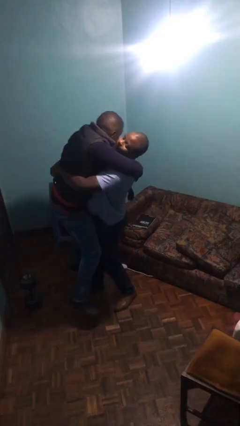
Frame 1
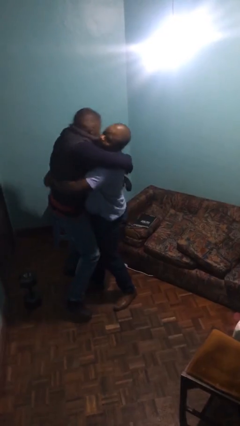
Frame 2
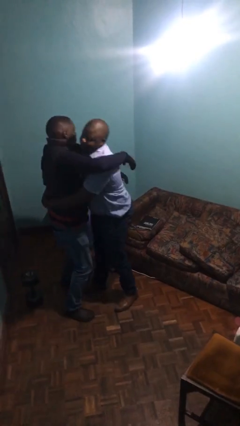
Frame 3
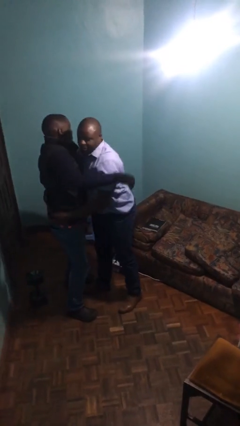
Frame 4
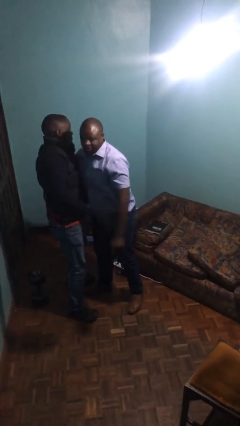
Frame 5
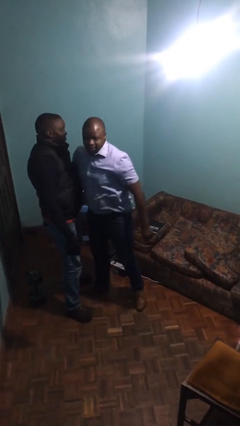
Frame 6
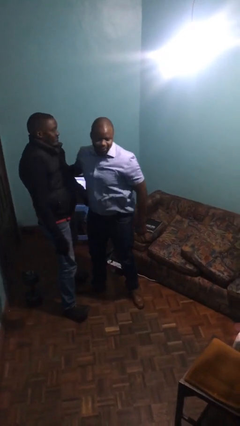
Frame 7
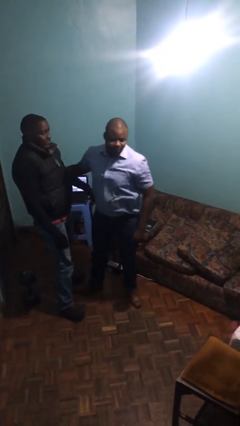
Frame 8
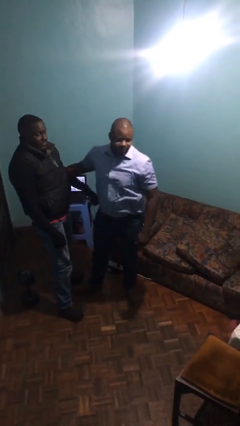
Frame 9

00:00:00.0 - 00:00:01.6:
person puts down person

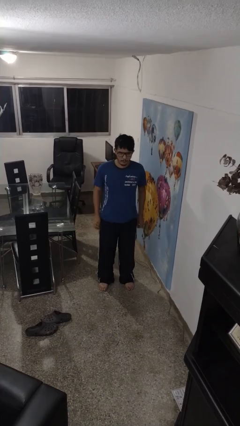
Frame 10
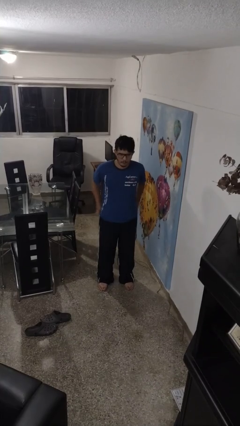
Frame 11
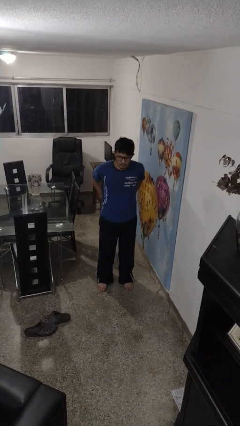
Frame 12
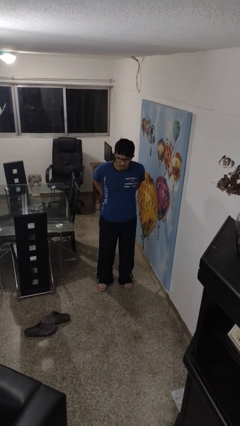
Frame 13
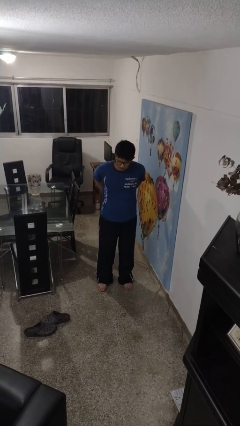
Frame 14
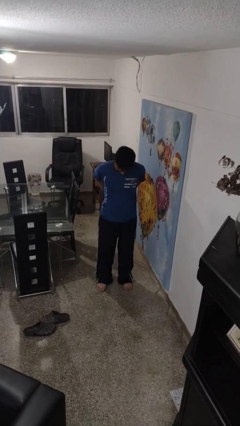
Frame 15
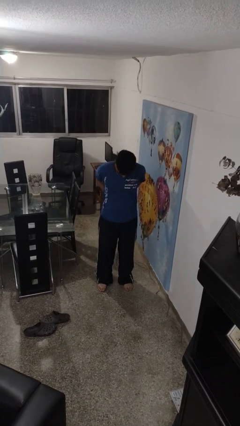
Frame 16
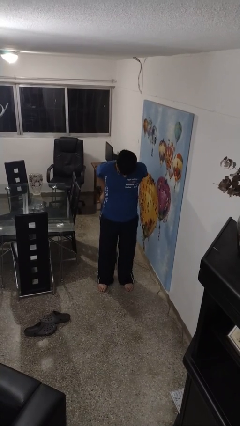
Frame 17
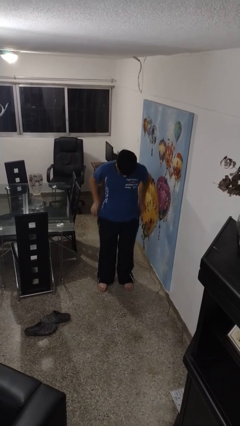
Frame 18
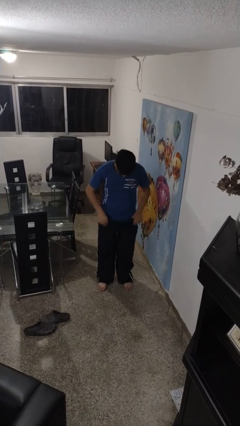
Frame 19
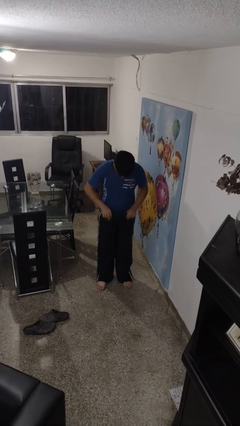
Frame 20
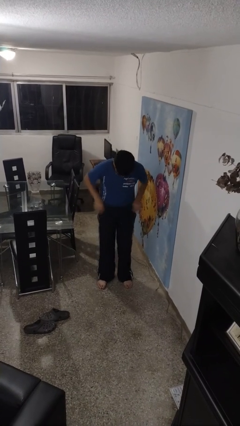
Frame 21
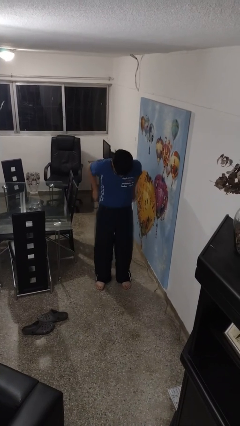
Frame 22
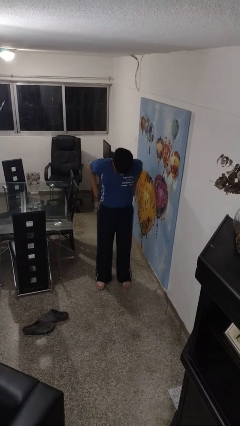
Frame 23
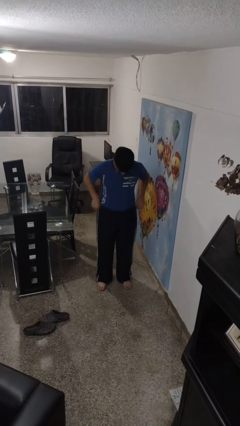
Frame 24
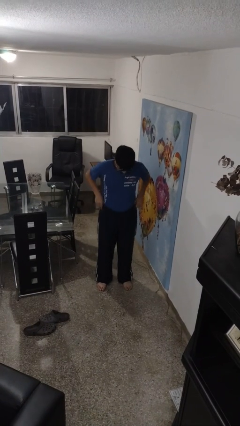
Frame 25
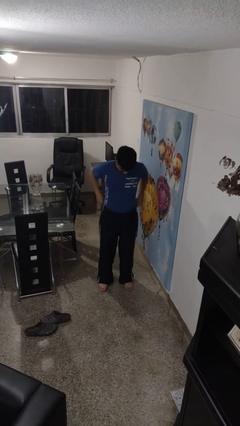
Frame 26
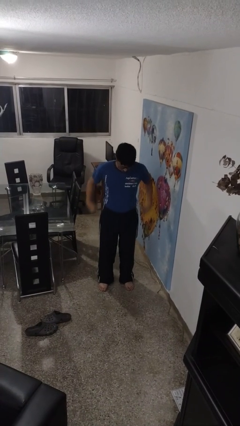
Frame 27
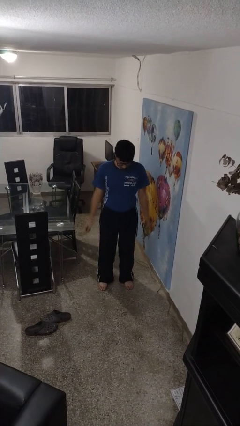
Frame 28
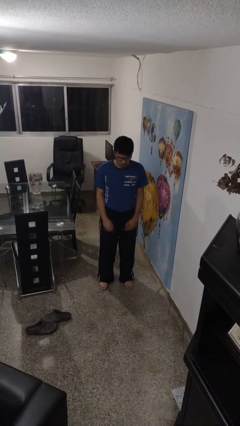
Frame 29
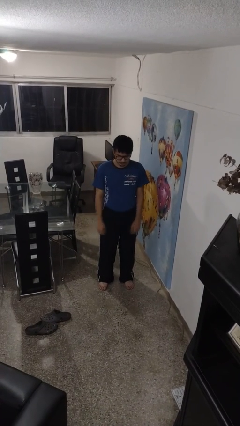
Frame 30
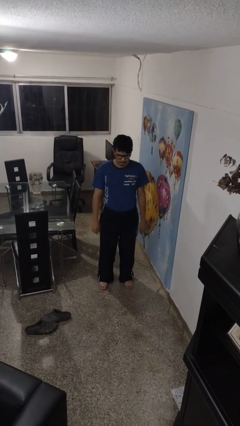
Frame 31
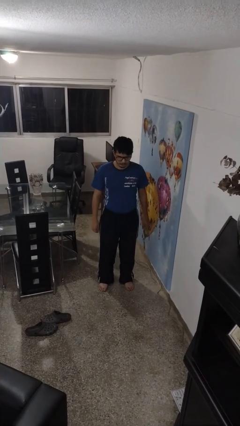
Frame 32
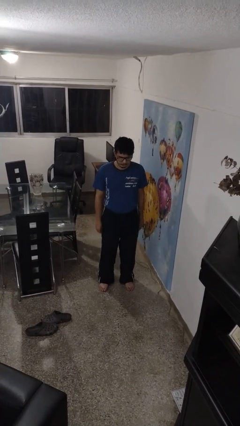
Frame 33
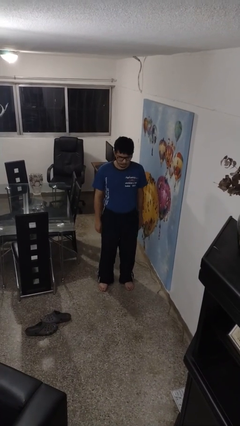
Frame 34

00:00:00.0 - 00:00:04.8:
person tucks in shirt

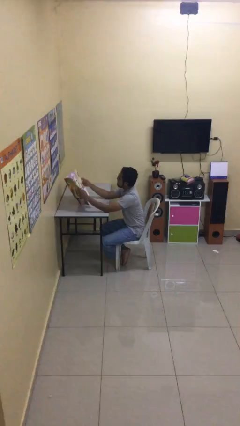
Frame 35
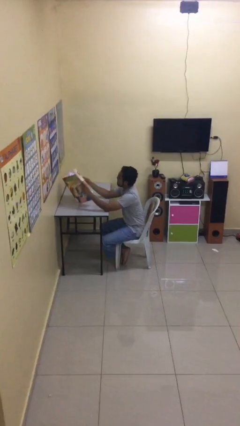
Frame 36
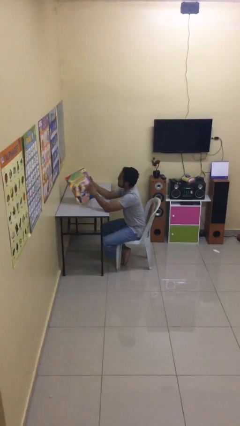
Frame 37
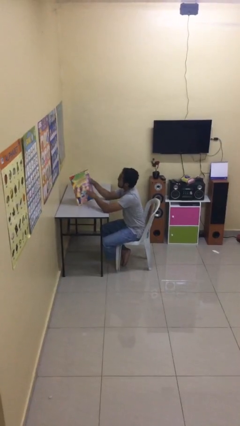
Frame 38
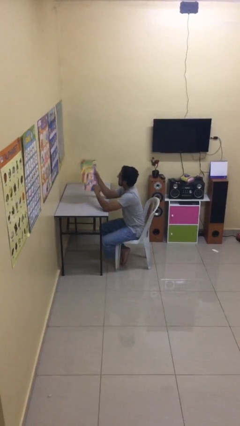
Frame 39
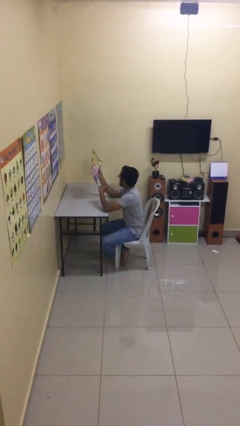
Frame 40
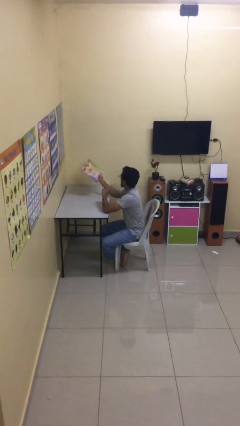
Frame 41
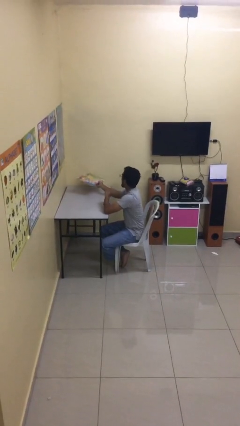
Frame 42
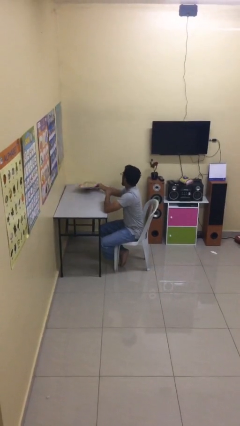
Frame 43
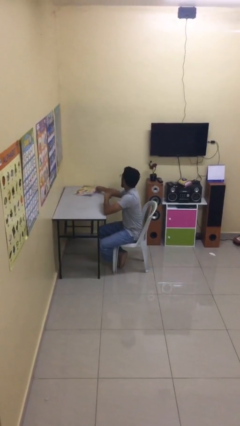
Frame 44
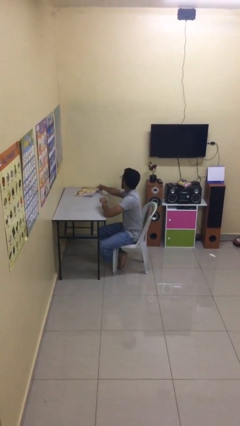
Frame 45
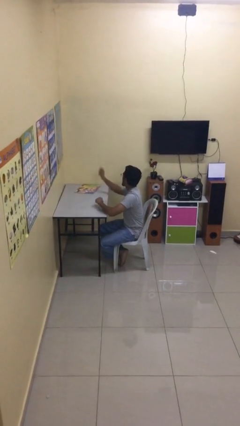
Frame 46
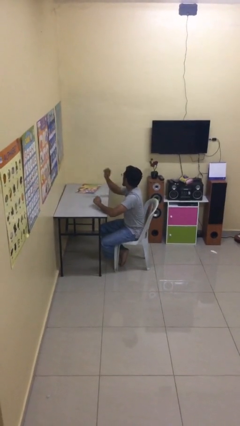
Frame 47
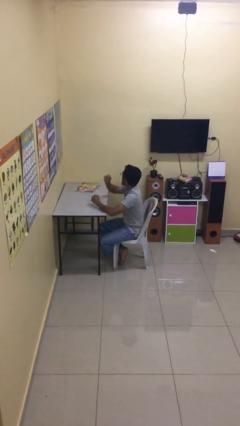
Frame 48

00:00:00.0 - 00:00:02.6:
person puts down object on table

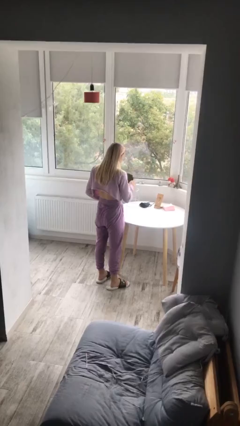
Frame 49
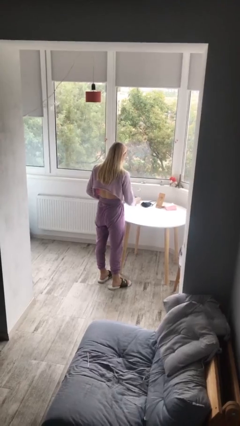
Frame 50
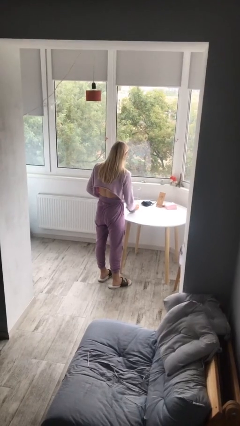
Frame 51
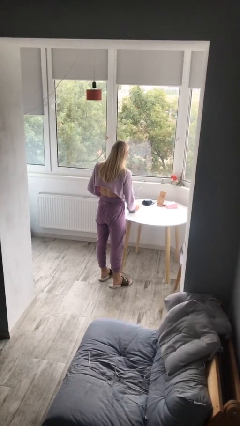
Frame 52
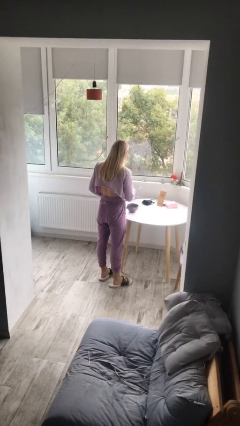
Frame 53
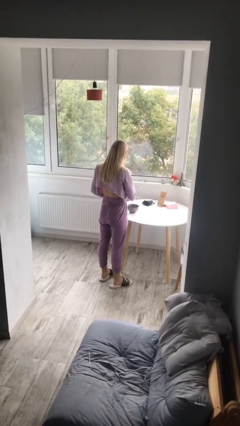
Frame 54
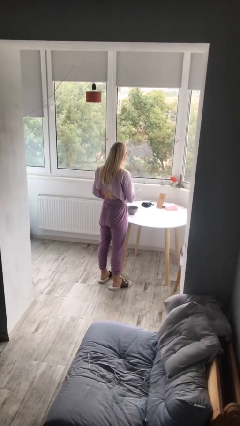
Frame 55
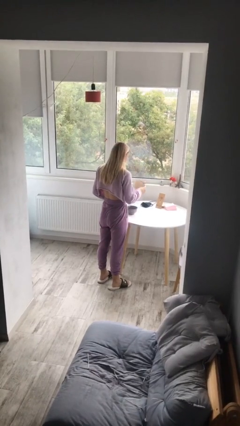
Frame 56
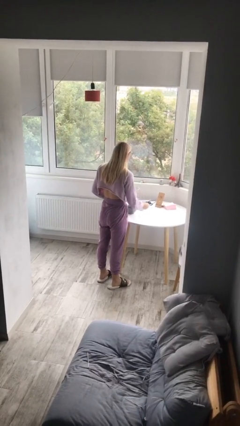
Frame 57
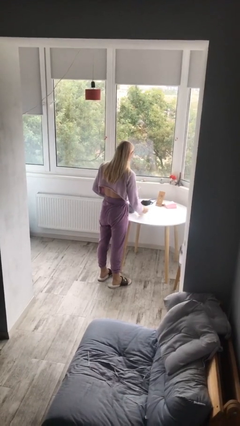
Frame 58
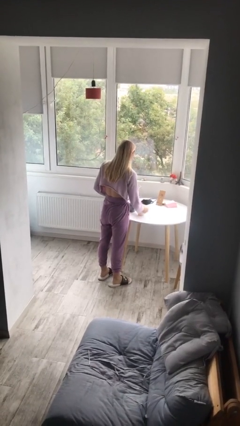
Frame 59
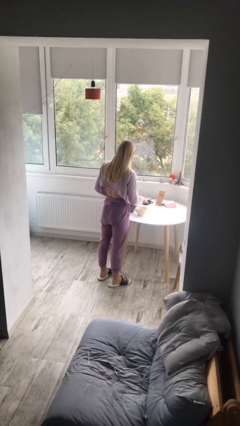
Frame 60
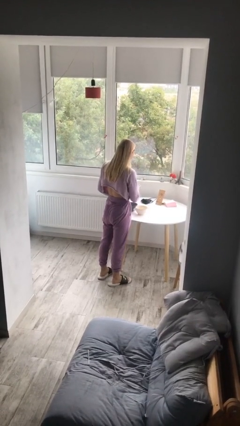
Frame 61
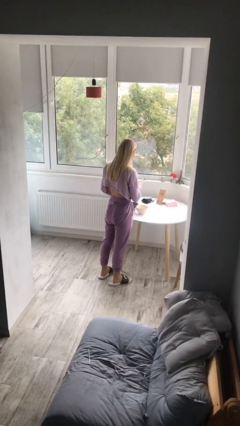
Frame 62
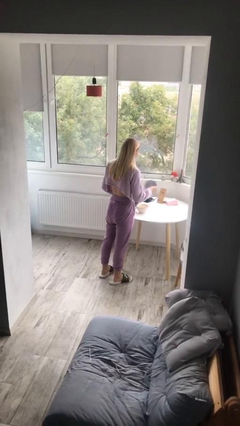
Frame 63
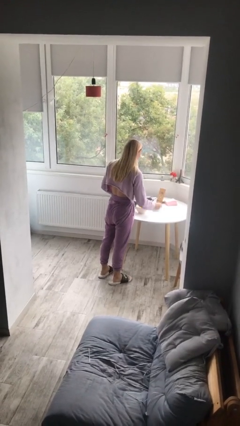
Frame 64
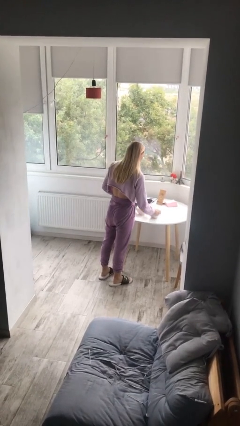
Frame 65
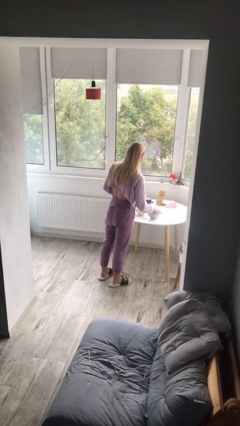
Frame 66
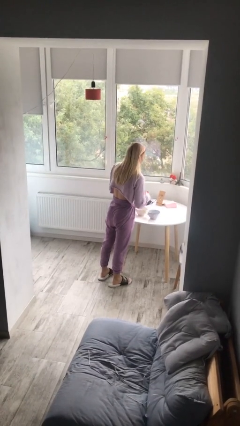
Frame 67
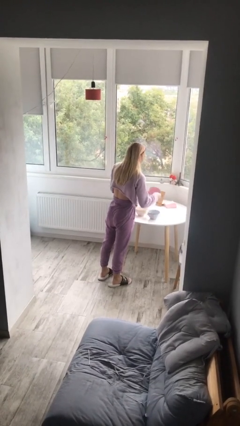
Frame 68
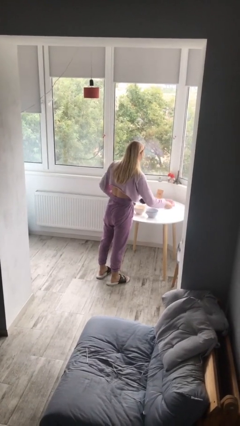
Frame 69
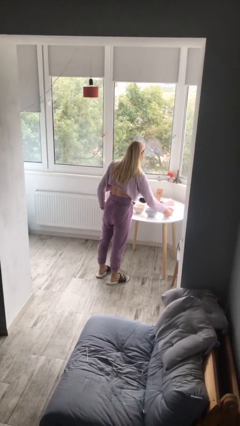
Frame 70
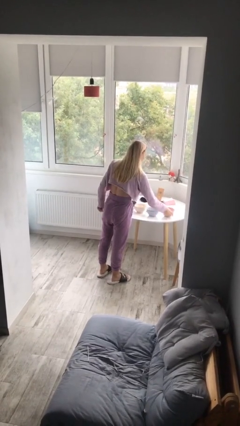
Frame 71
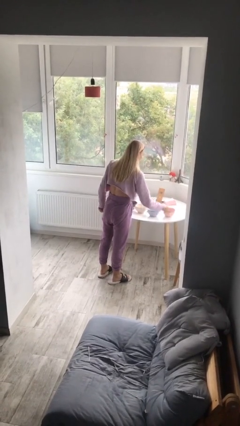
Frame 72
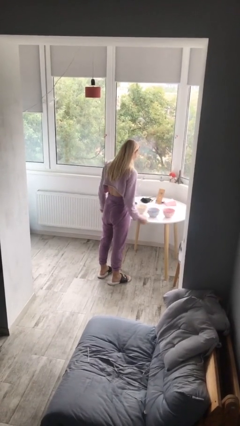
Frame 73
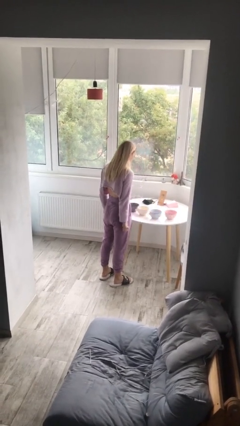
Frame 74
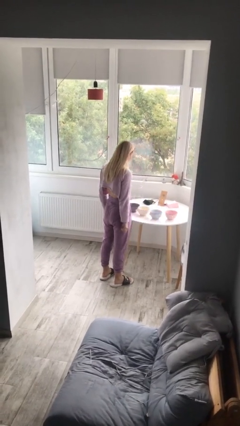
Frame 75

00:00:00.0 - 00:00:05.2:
person sets table

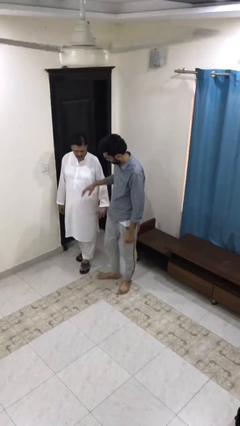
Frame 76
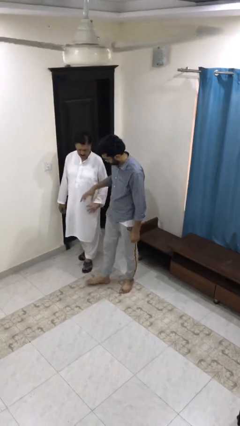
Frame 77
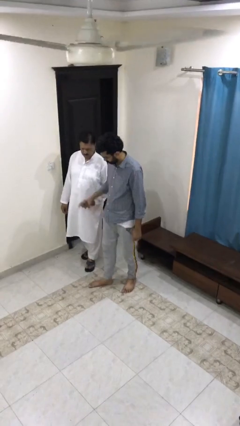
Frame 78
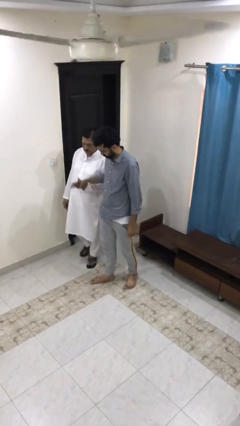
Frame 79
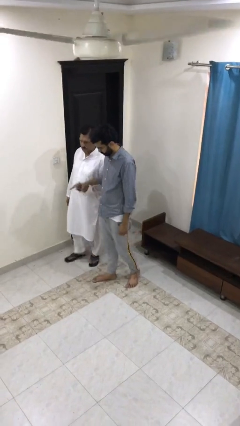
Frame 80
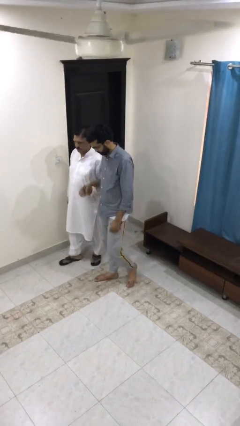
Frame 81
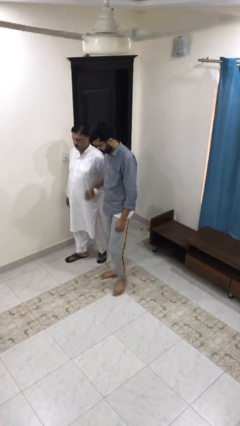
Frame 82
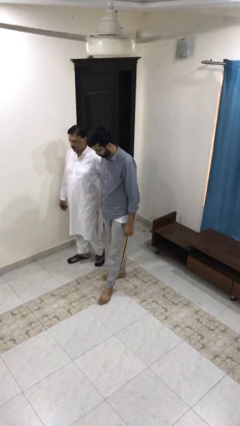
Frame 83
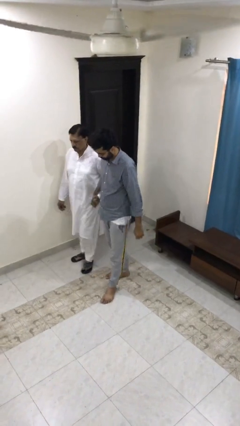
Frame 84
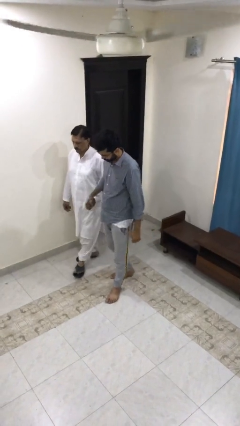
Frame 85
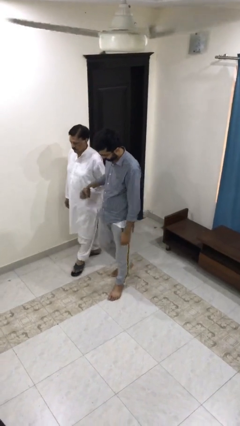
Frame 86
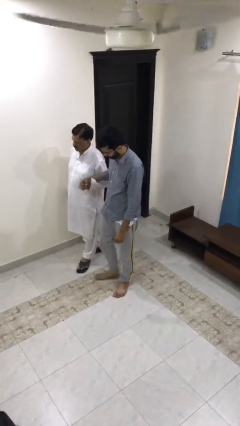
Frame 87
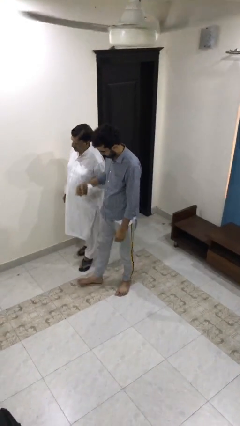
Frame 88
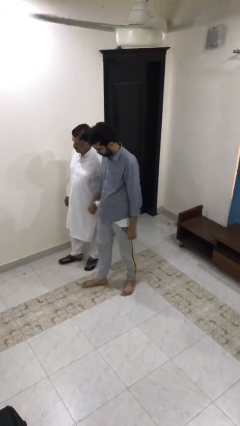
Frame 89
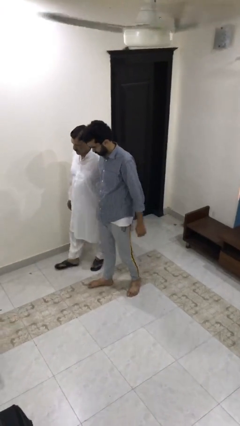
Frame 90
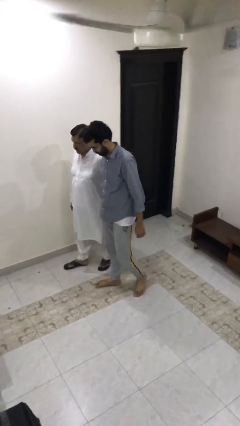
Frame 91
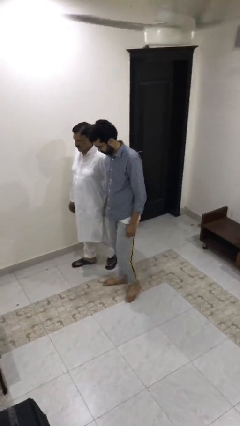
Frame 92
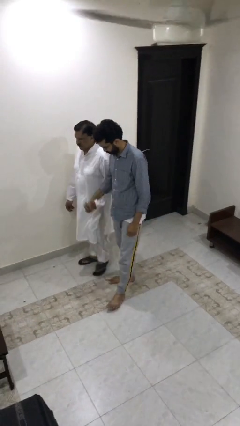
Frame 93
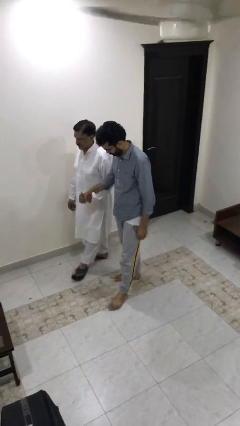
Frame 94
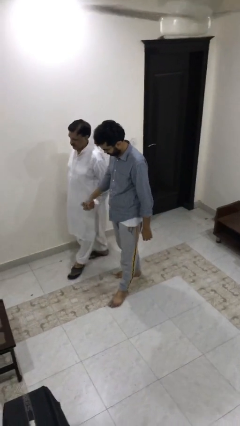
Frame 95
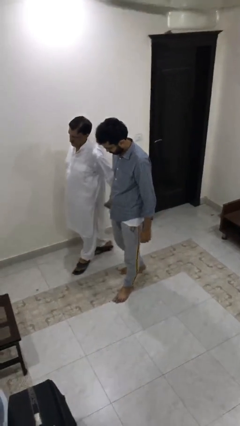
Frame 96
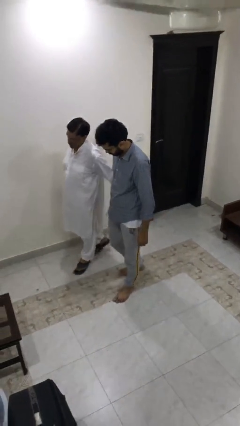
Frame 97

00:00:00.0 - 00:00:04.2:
person holds hand
